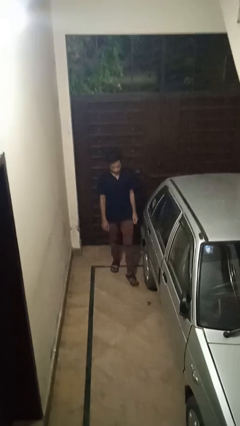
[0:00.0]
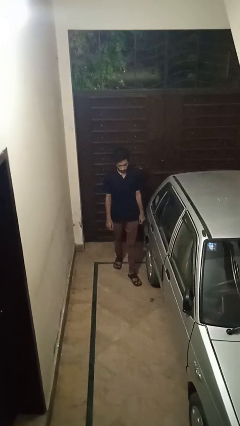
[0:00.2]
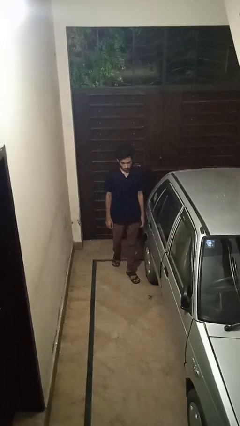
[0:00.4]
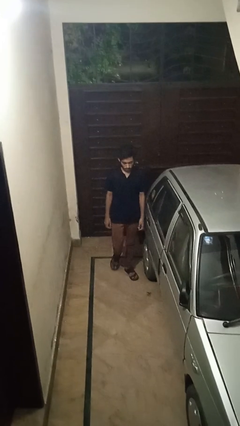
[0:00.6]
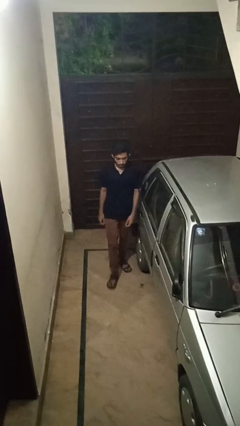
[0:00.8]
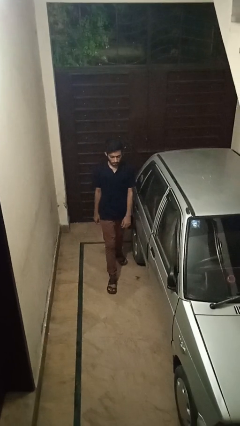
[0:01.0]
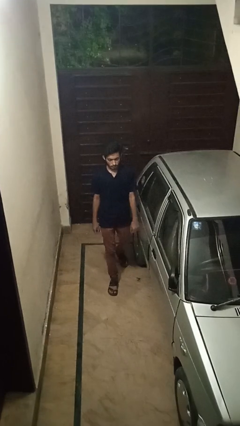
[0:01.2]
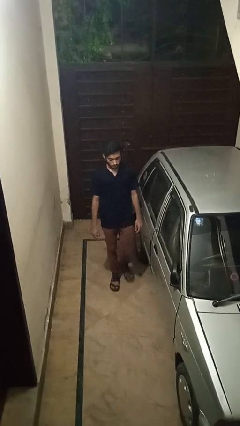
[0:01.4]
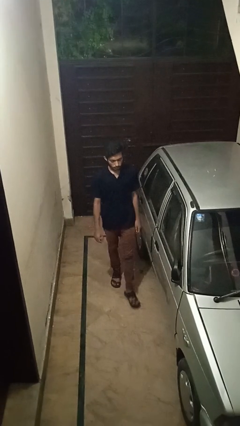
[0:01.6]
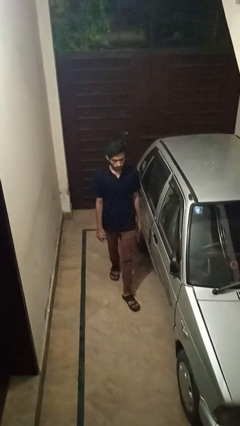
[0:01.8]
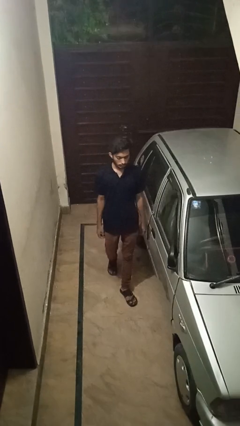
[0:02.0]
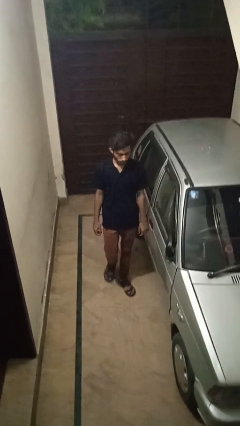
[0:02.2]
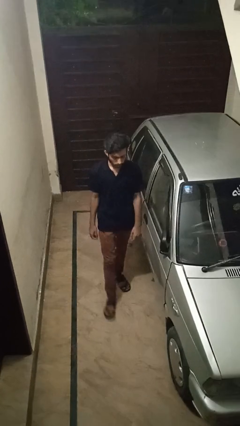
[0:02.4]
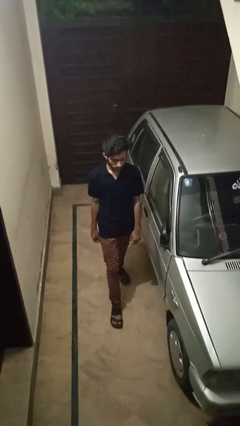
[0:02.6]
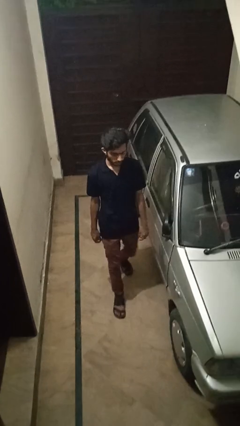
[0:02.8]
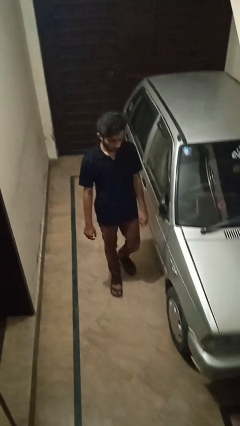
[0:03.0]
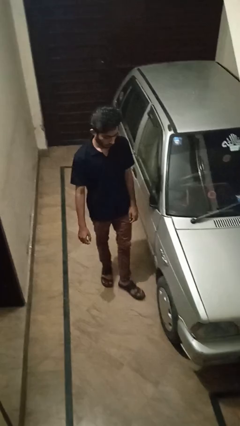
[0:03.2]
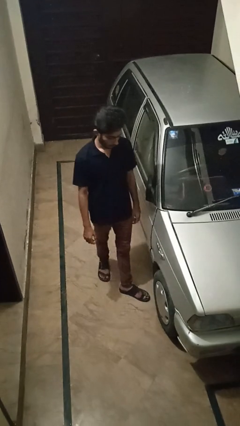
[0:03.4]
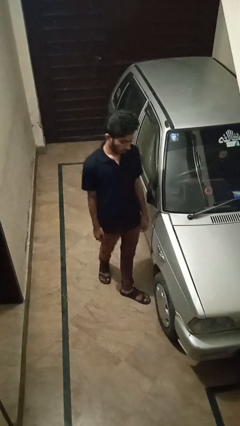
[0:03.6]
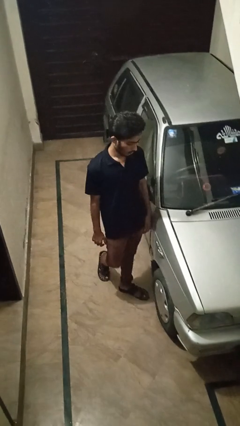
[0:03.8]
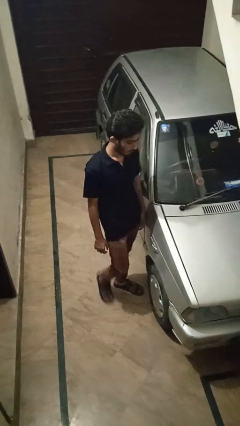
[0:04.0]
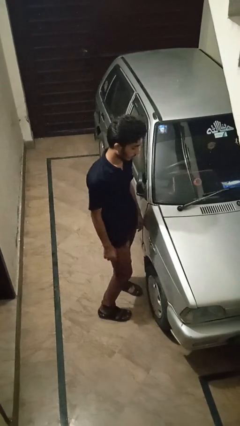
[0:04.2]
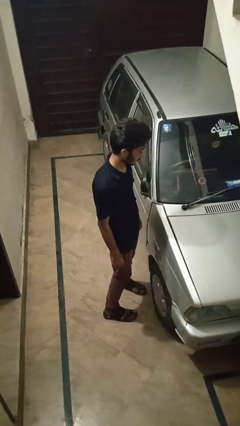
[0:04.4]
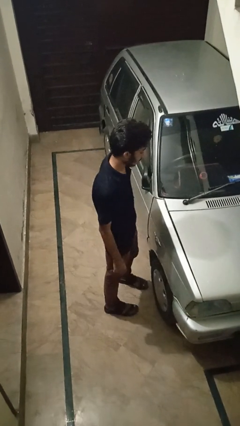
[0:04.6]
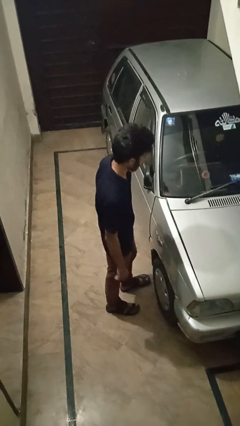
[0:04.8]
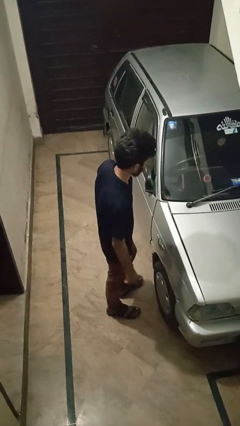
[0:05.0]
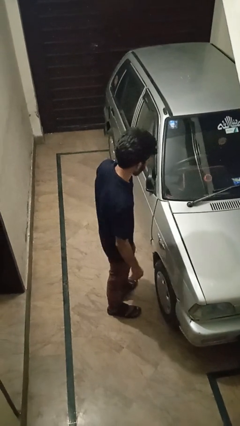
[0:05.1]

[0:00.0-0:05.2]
person walks around car

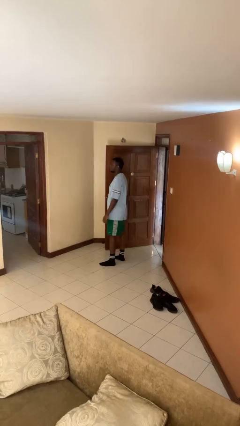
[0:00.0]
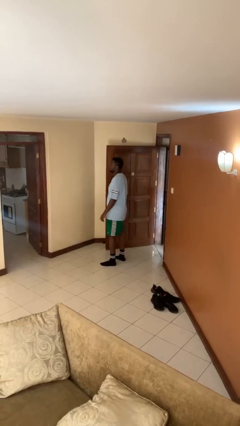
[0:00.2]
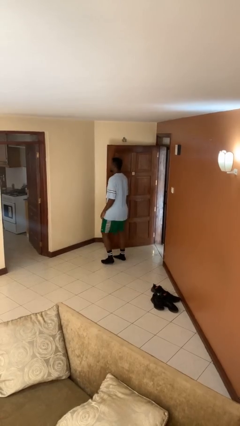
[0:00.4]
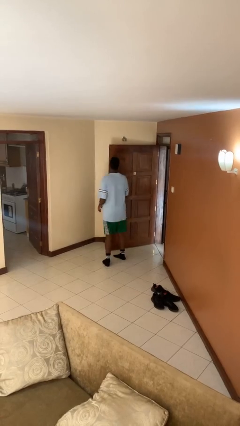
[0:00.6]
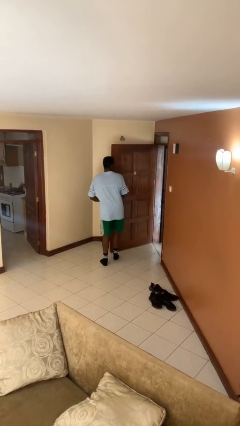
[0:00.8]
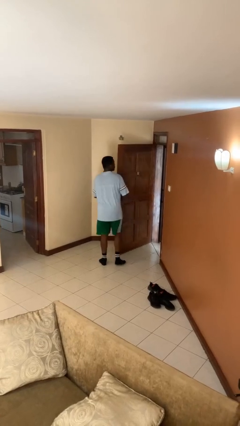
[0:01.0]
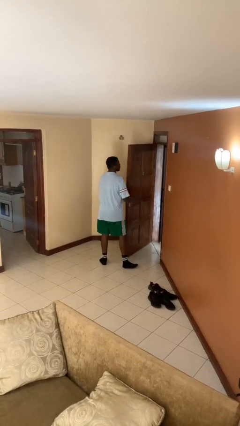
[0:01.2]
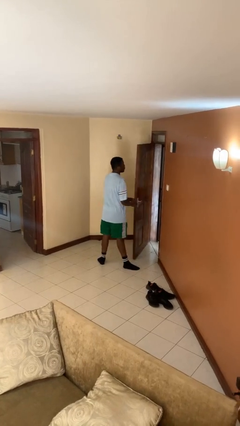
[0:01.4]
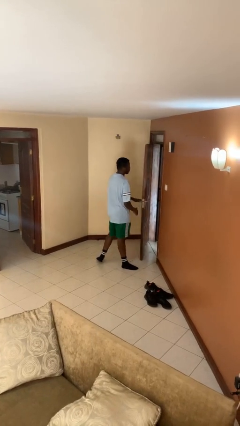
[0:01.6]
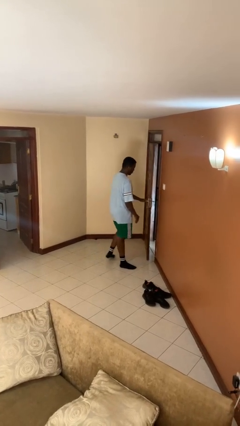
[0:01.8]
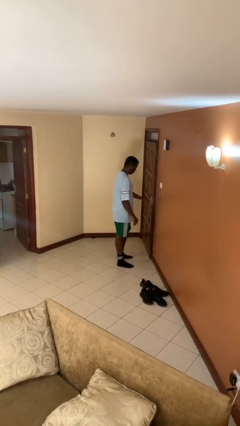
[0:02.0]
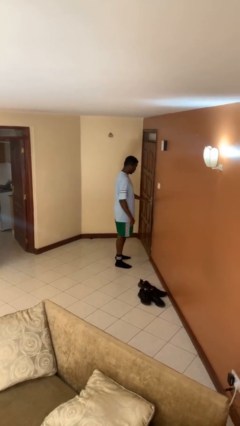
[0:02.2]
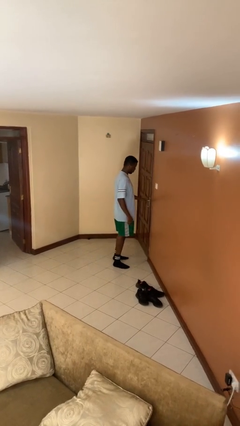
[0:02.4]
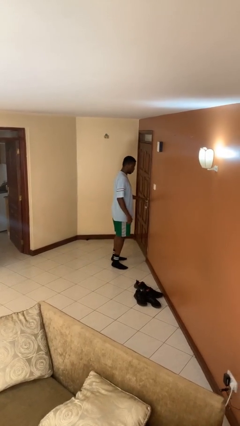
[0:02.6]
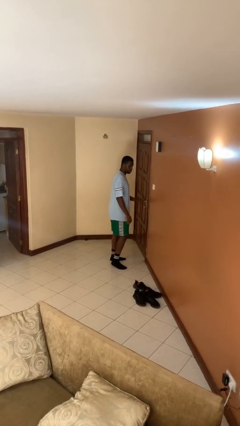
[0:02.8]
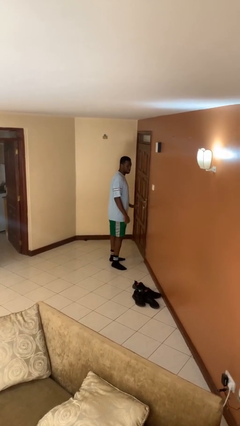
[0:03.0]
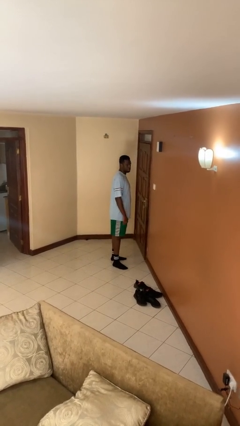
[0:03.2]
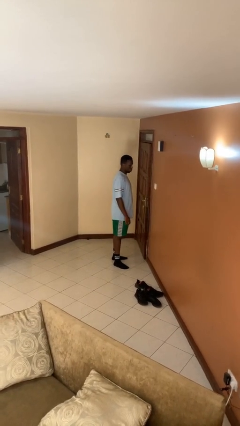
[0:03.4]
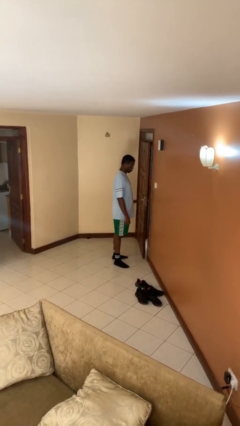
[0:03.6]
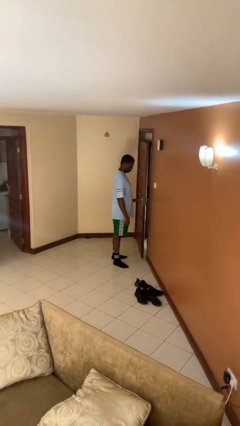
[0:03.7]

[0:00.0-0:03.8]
person closes facility door

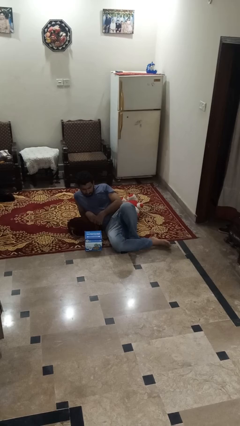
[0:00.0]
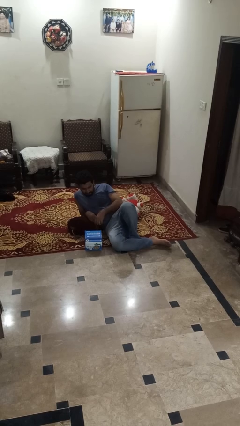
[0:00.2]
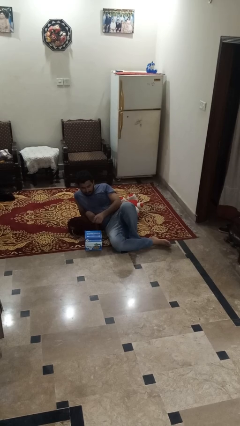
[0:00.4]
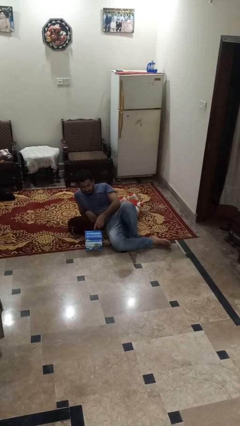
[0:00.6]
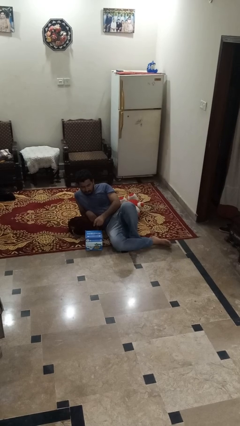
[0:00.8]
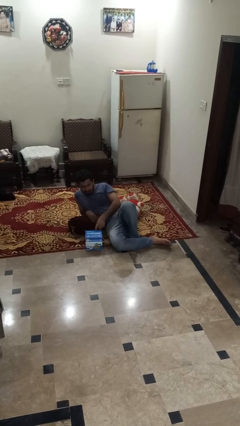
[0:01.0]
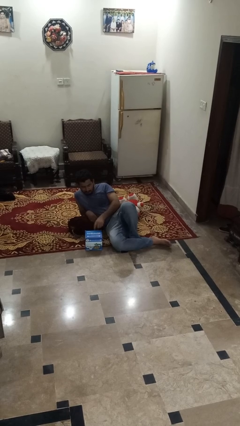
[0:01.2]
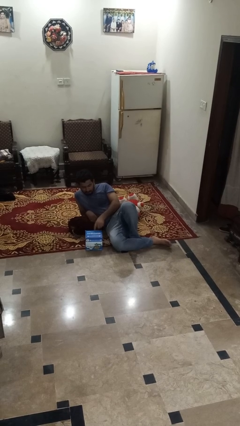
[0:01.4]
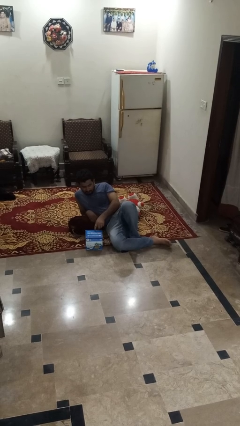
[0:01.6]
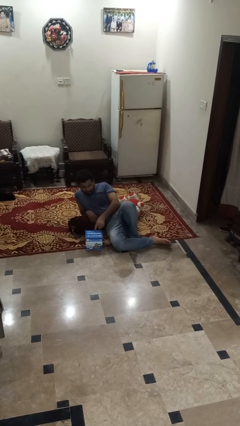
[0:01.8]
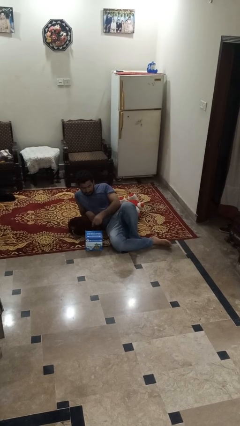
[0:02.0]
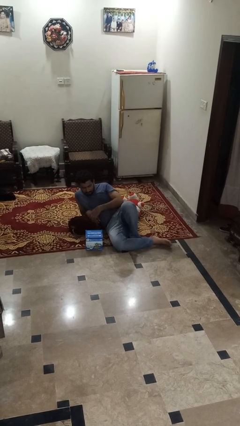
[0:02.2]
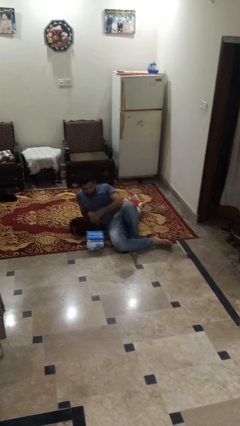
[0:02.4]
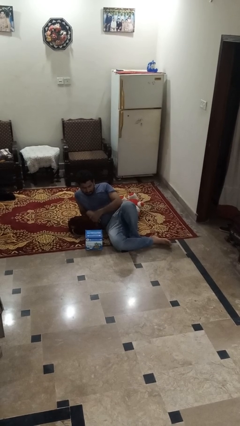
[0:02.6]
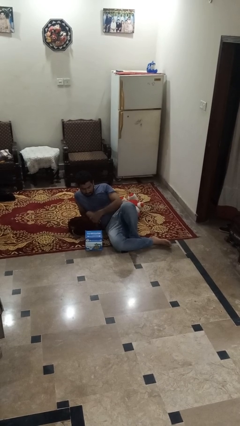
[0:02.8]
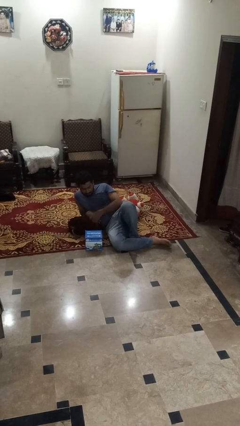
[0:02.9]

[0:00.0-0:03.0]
person taps object with finger

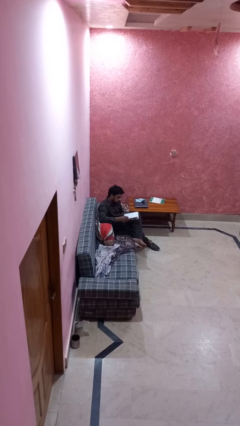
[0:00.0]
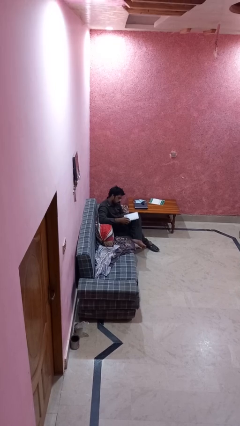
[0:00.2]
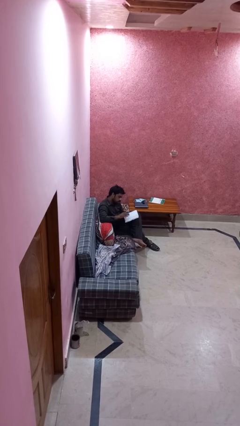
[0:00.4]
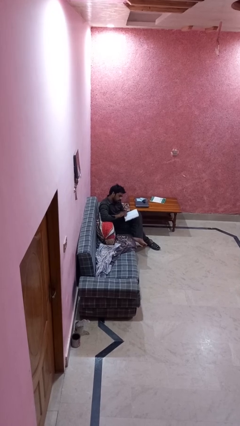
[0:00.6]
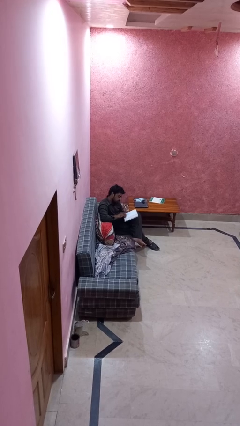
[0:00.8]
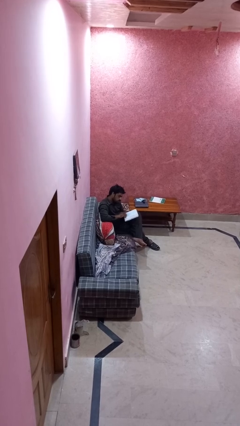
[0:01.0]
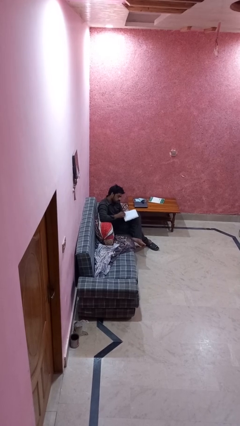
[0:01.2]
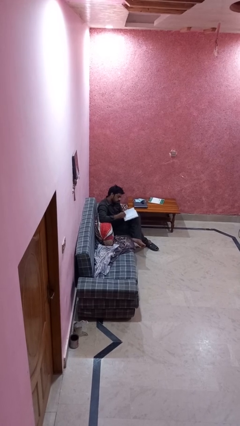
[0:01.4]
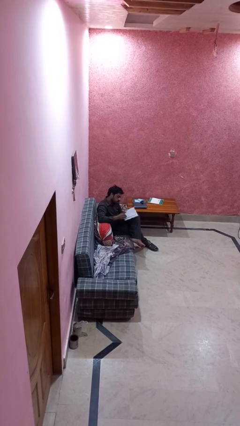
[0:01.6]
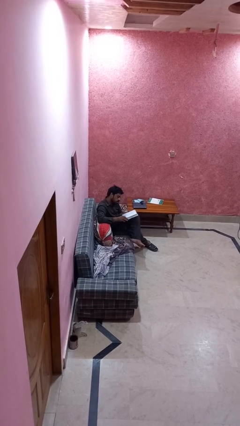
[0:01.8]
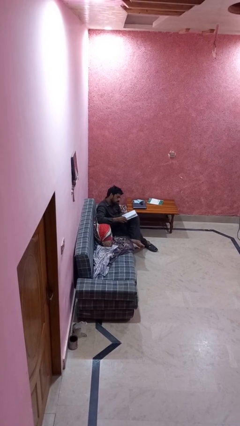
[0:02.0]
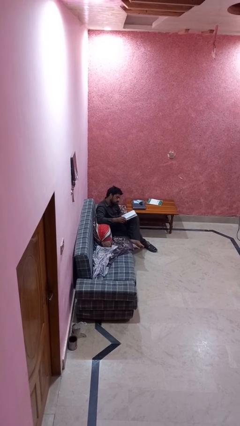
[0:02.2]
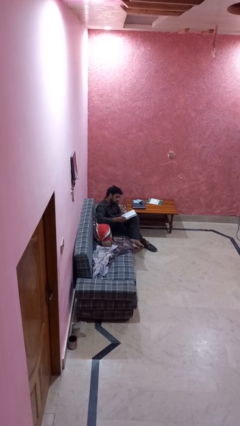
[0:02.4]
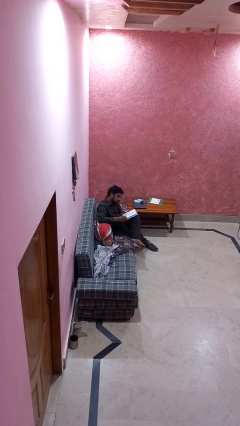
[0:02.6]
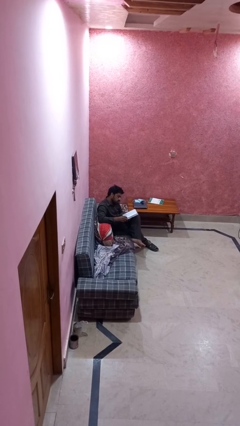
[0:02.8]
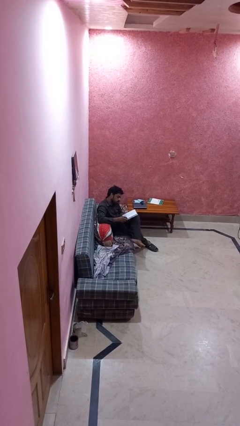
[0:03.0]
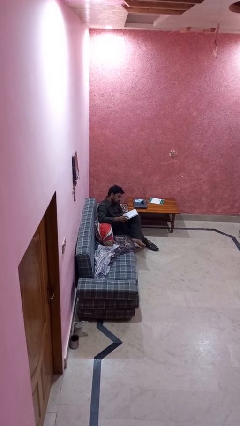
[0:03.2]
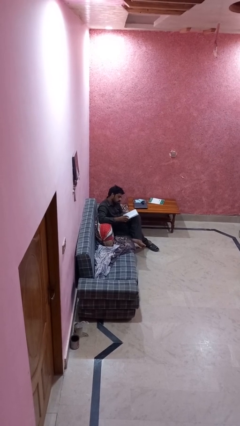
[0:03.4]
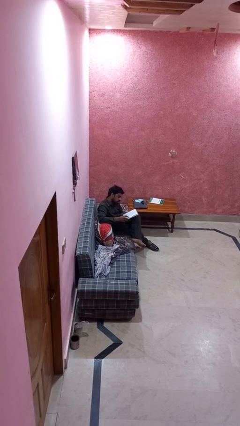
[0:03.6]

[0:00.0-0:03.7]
person reads book

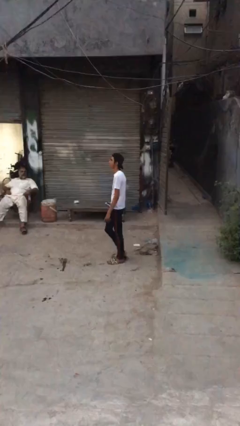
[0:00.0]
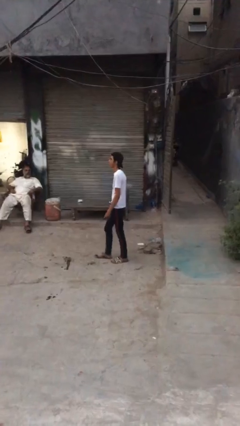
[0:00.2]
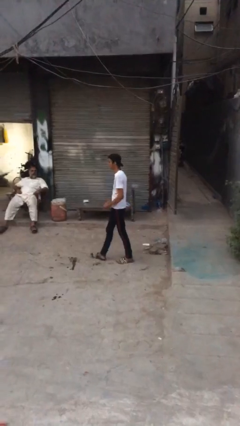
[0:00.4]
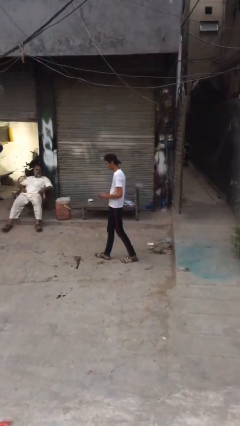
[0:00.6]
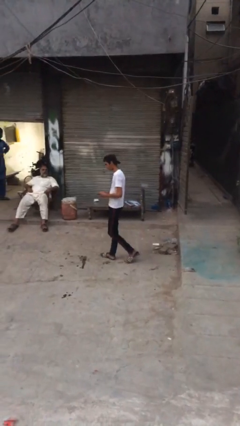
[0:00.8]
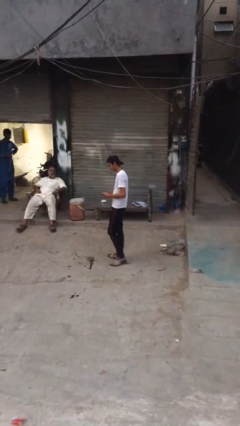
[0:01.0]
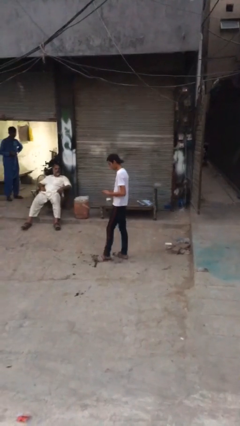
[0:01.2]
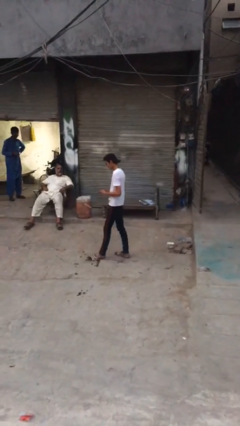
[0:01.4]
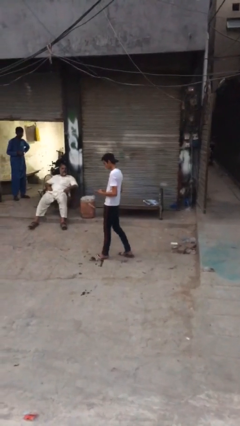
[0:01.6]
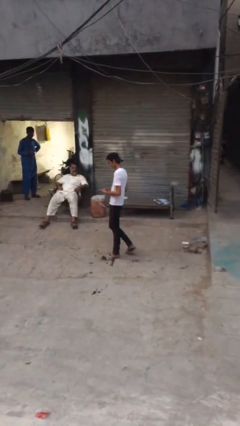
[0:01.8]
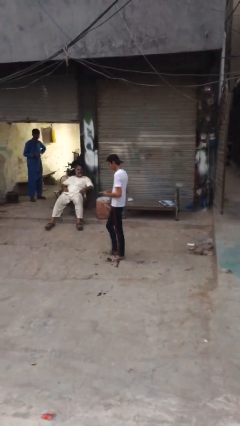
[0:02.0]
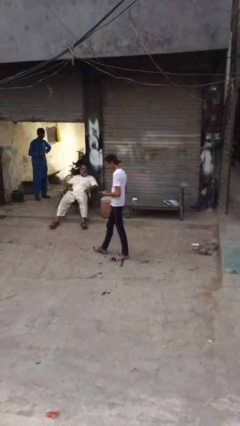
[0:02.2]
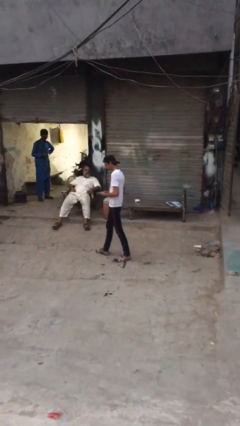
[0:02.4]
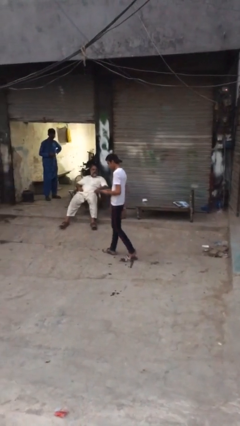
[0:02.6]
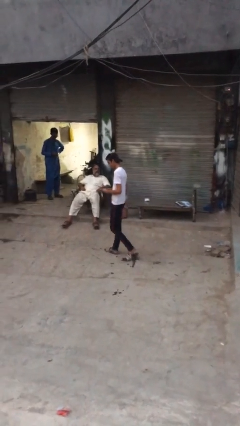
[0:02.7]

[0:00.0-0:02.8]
person texts on phone
